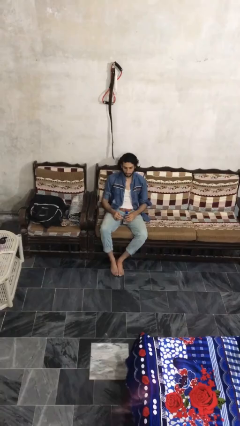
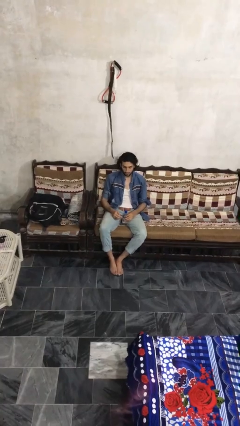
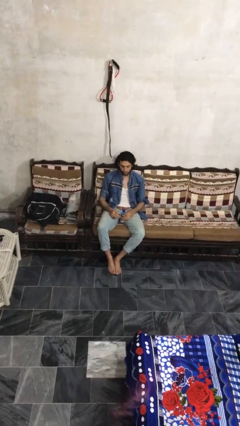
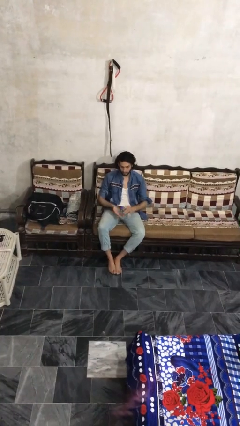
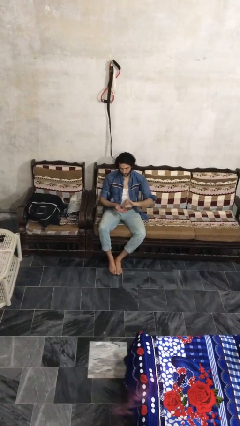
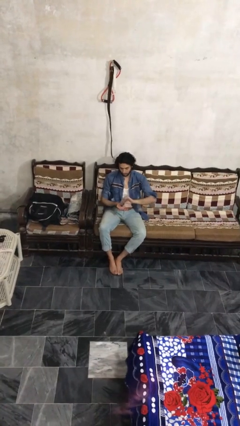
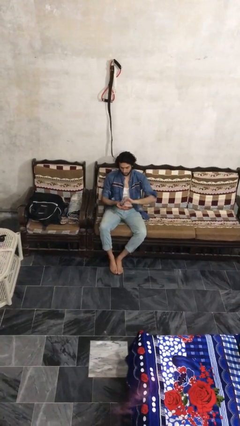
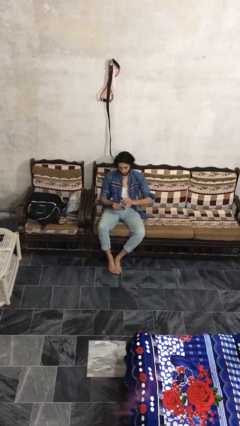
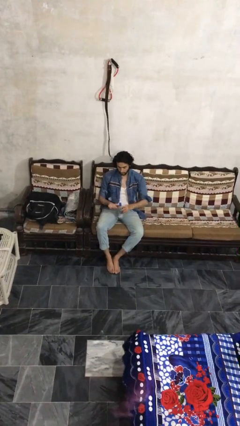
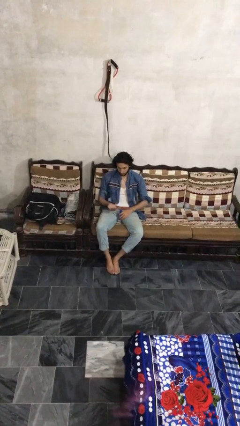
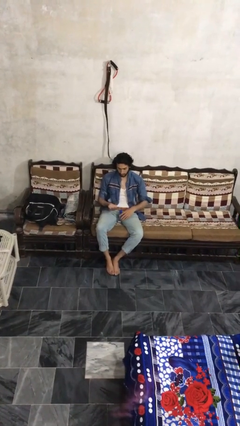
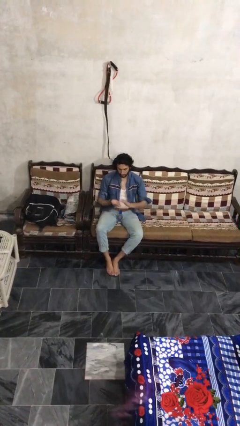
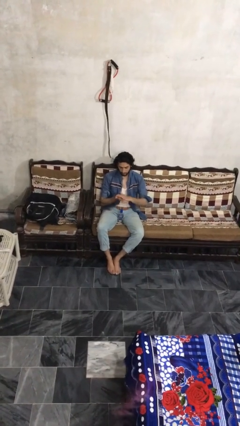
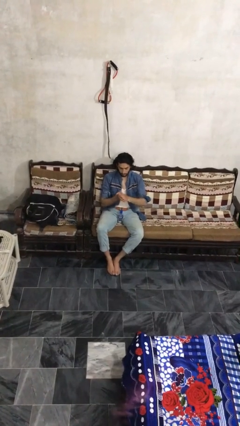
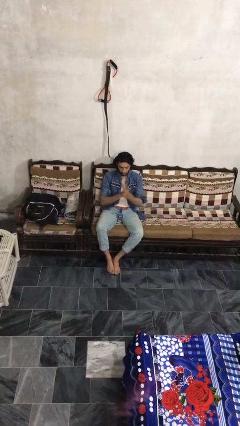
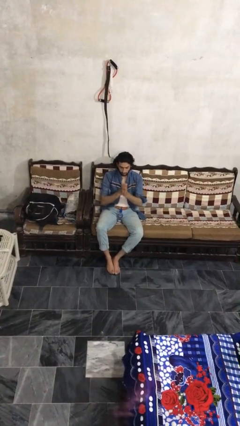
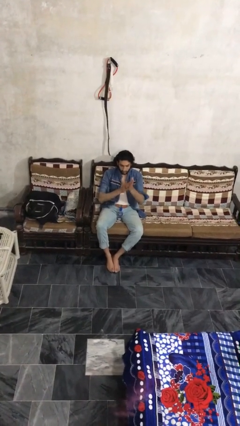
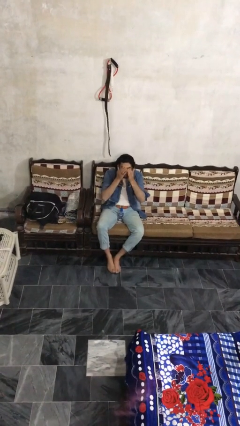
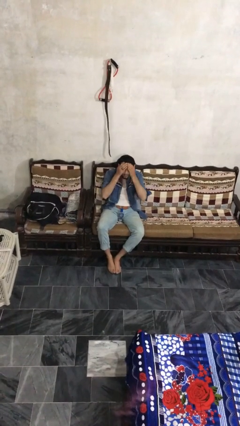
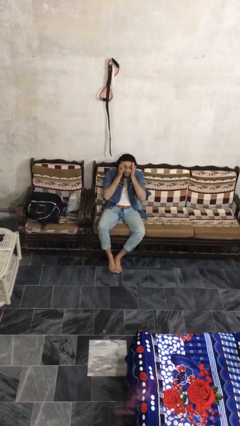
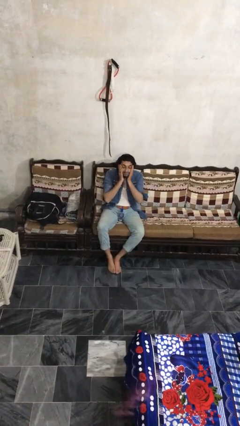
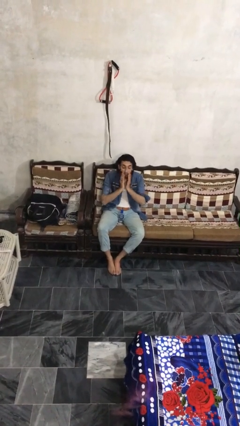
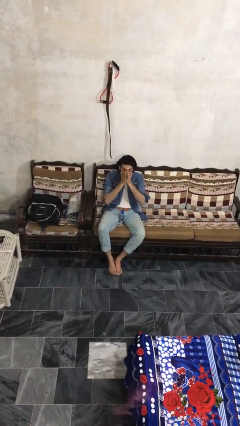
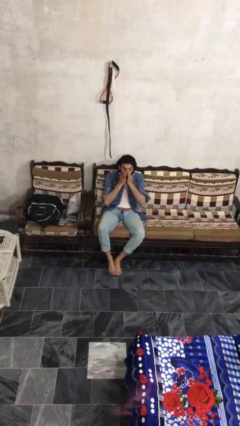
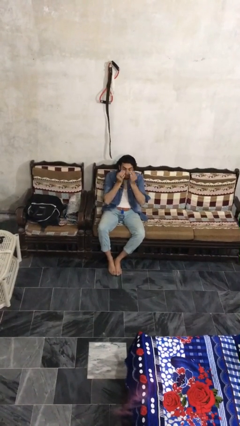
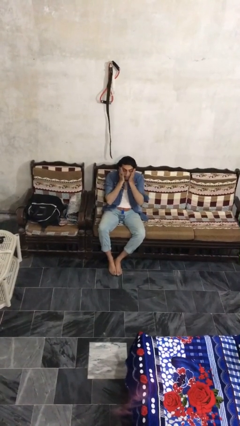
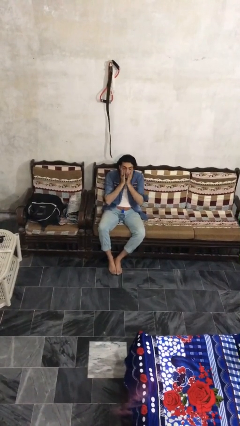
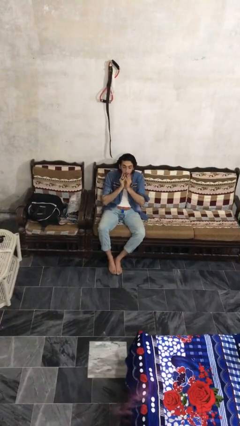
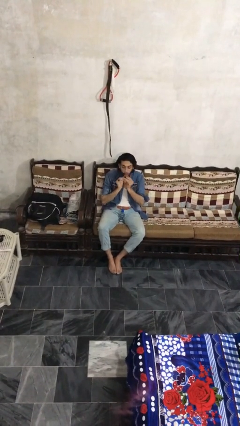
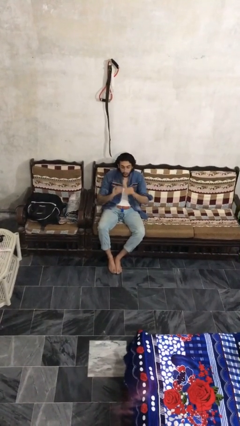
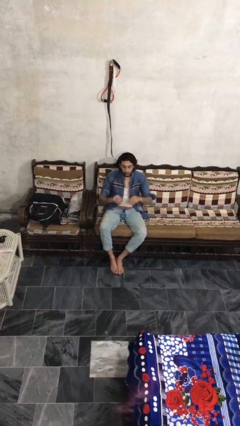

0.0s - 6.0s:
person applies facial moisturizer

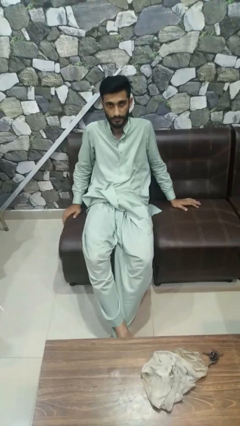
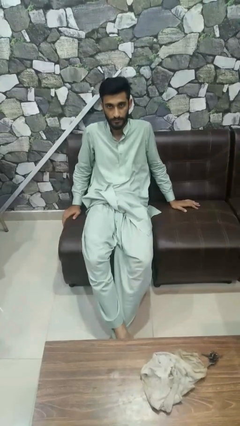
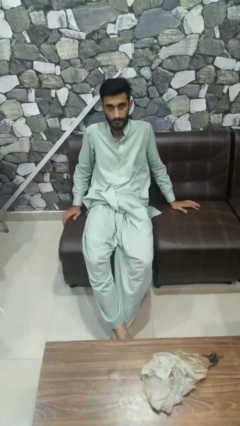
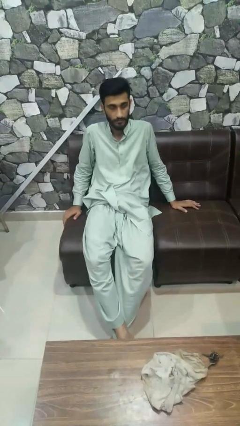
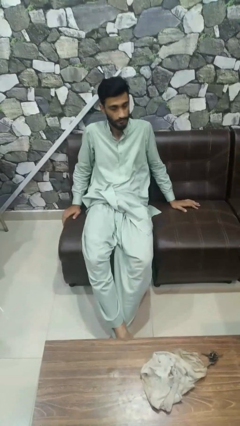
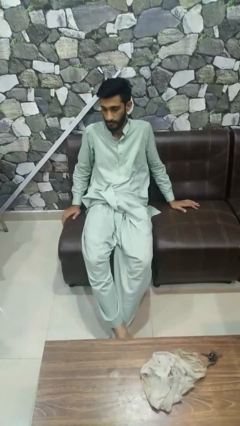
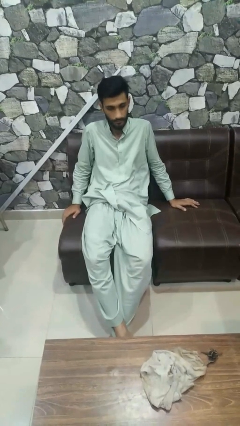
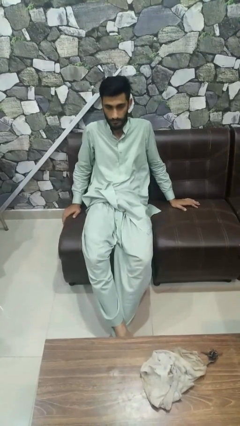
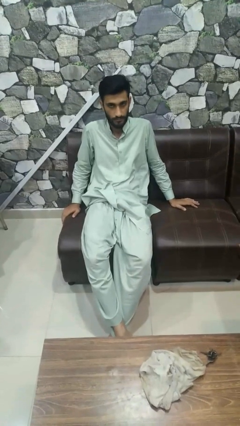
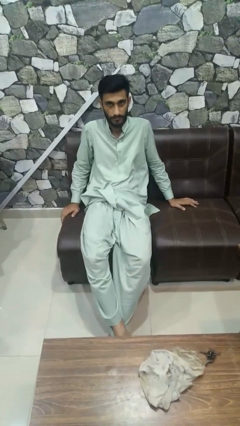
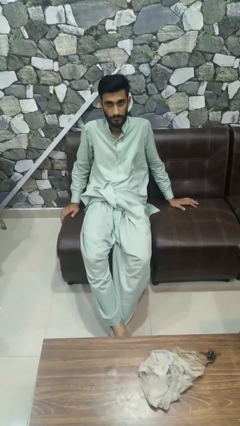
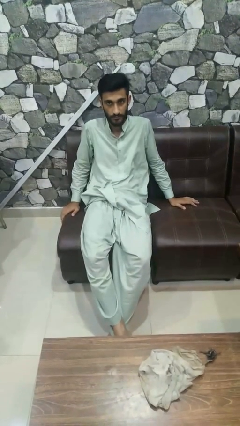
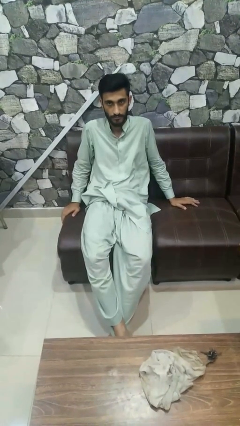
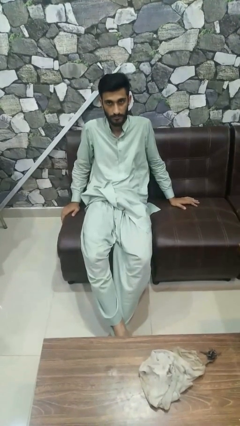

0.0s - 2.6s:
person shakes head

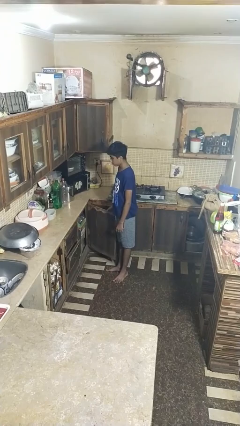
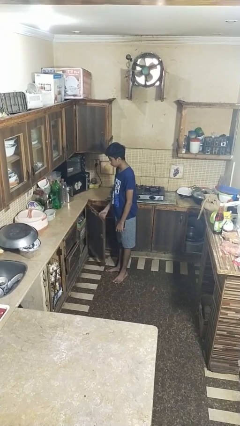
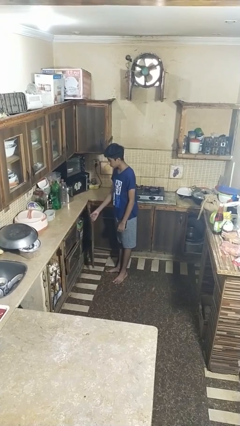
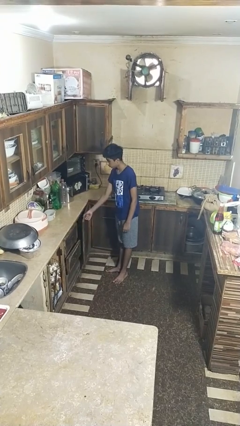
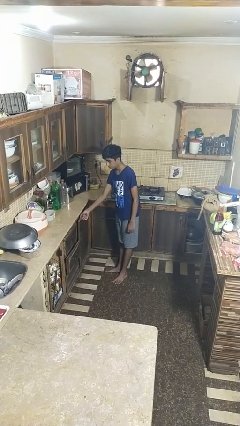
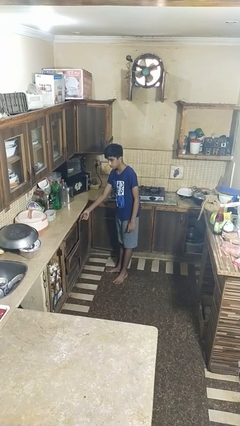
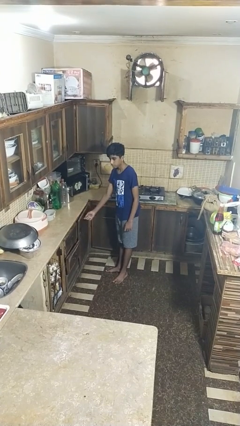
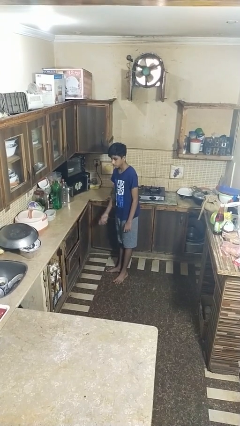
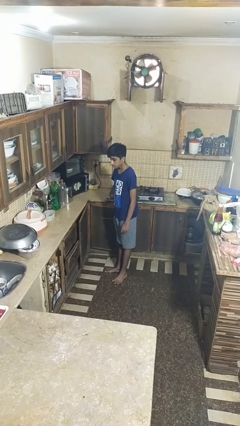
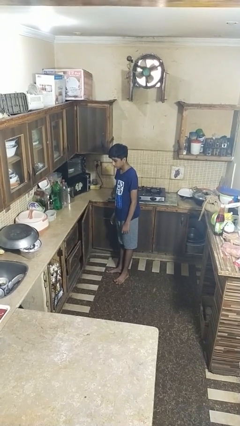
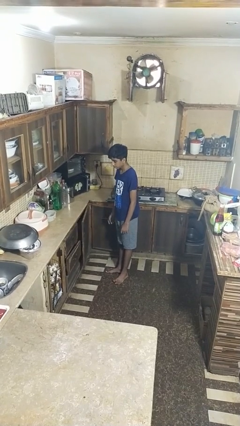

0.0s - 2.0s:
person closes closet door

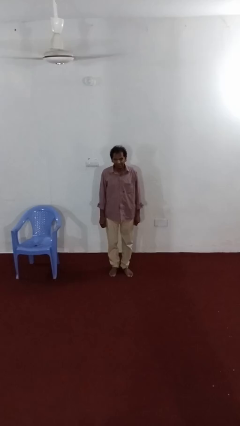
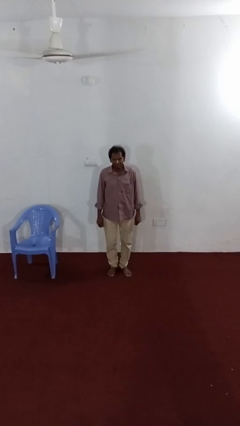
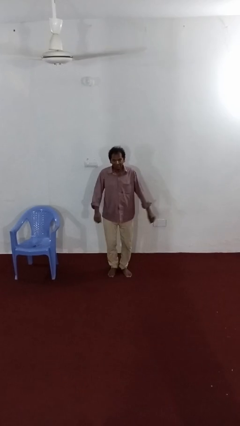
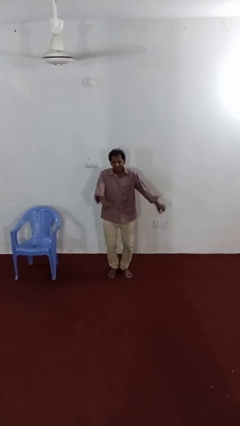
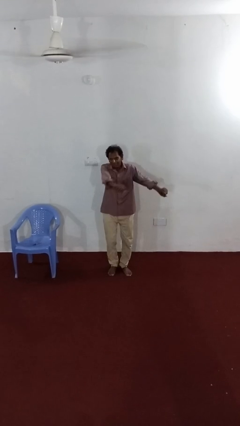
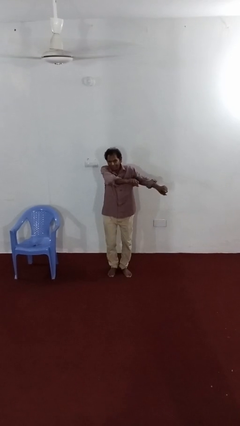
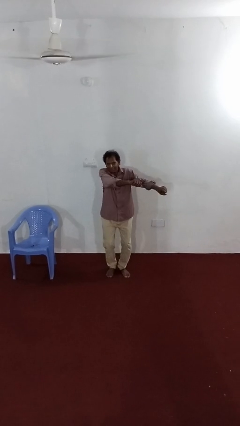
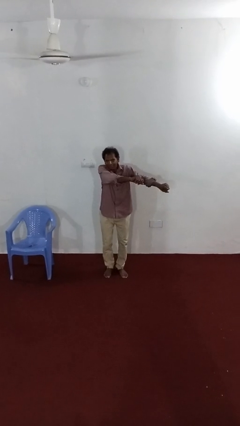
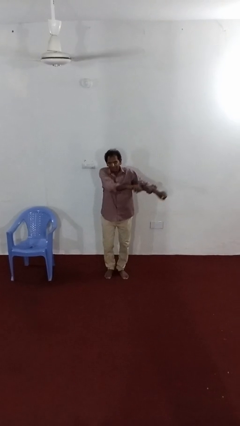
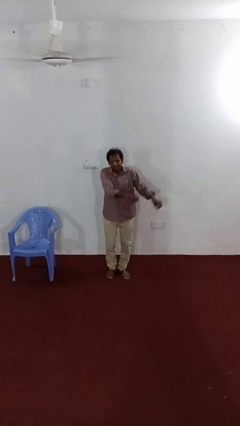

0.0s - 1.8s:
person dances in place

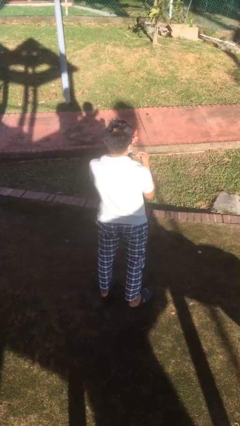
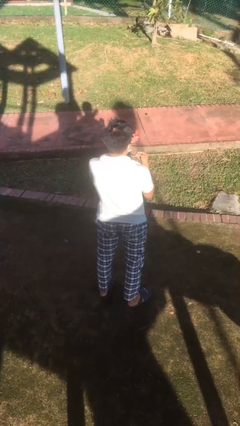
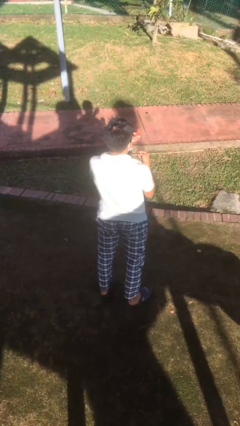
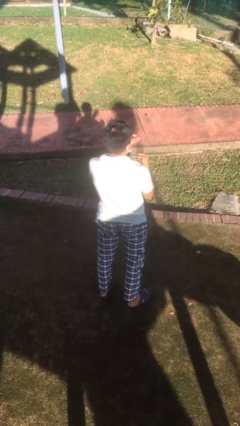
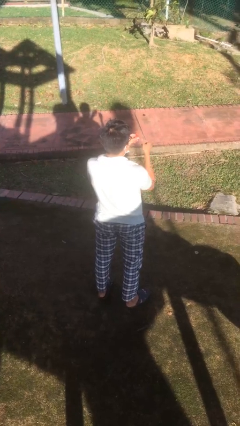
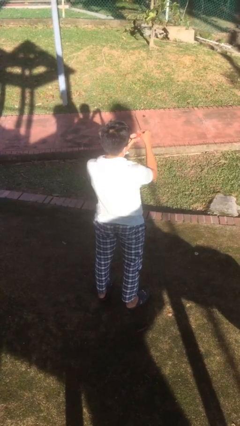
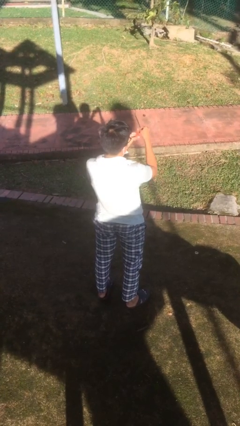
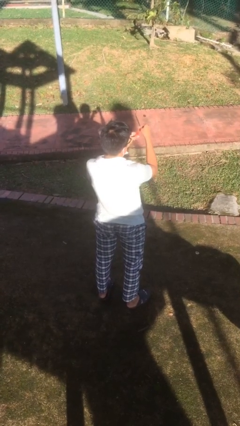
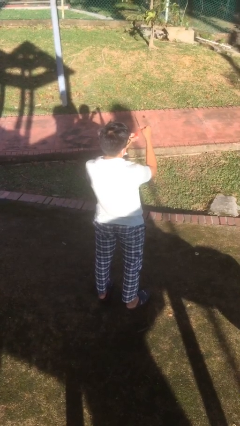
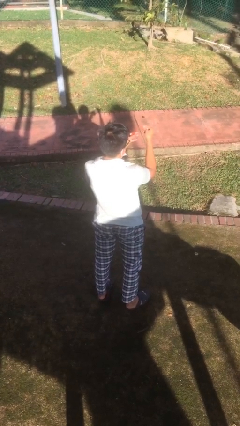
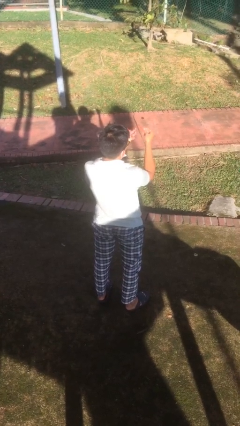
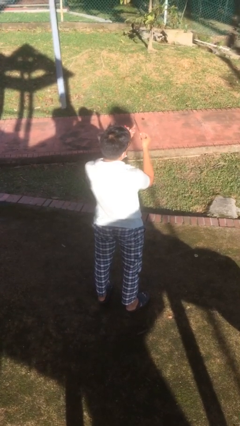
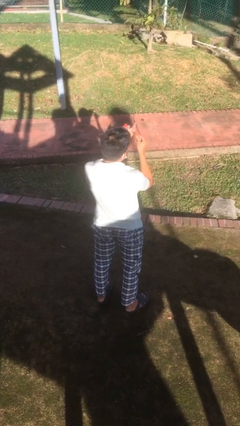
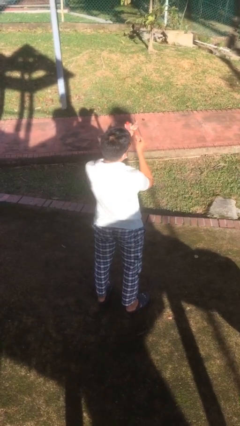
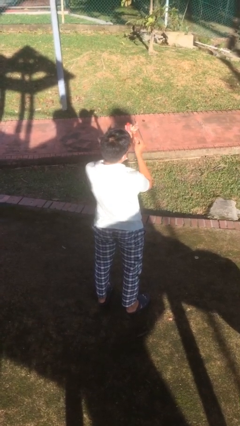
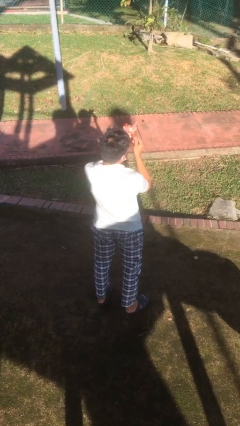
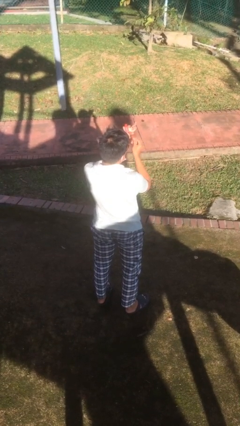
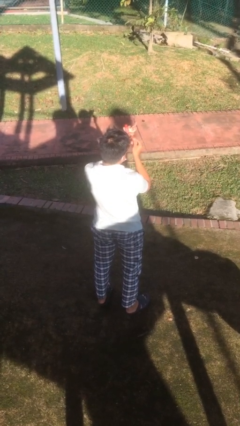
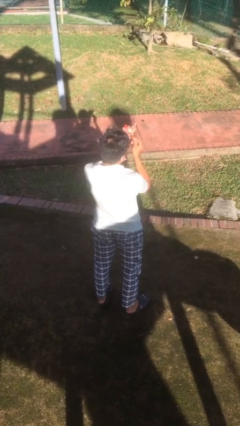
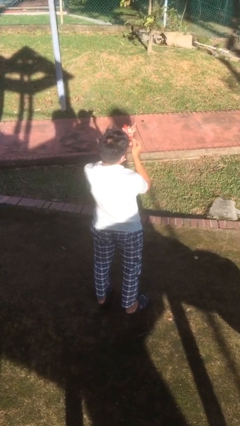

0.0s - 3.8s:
person paints fingernails

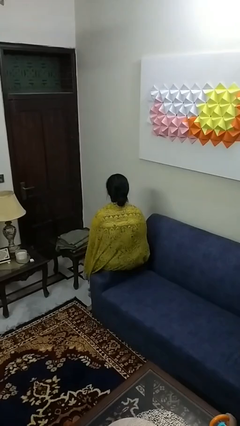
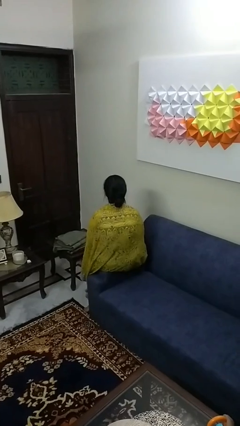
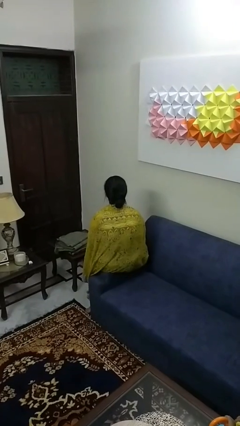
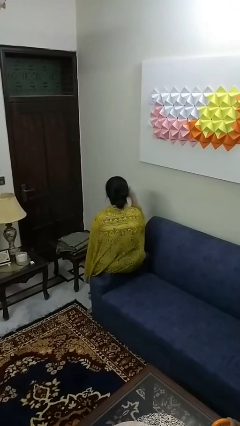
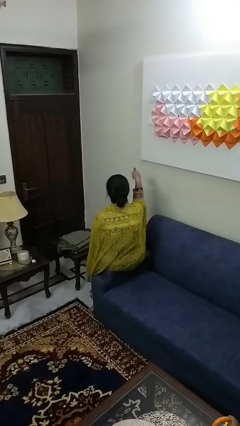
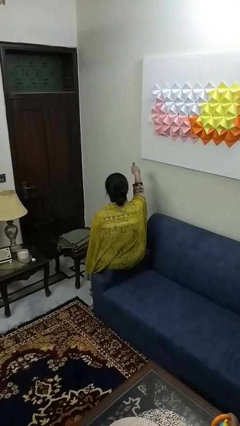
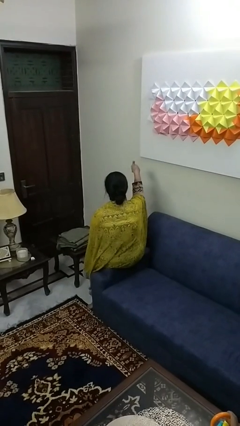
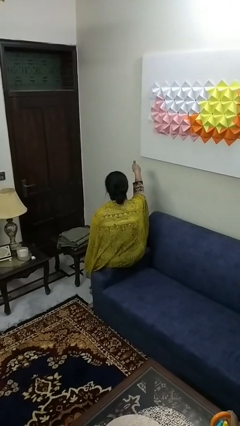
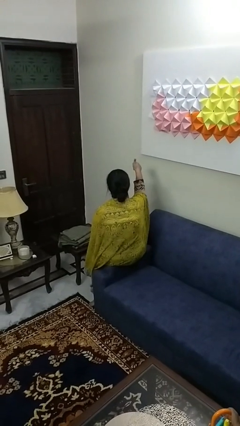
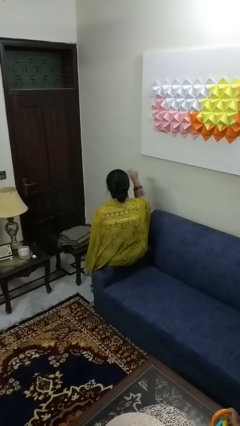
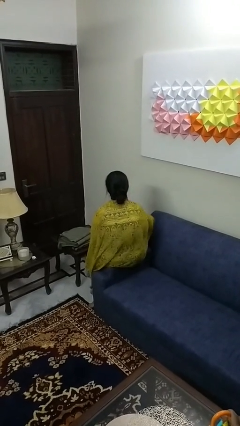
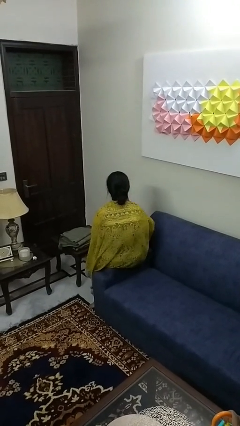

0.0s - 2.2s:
person gestures thumbs up
